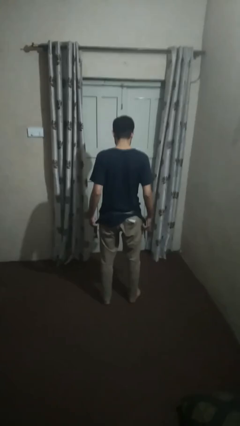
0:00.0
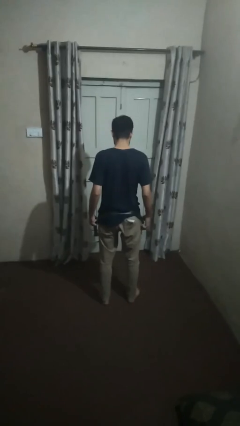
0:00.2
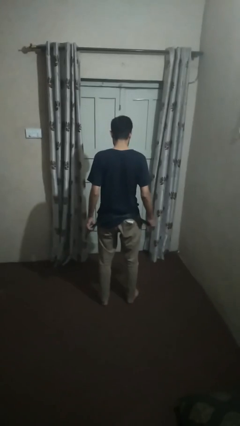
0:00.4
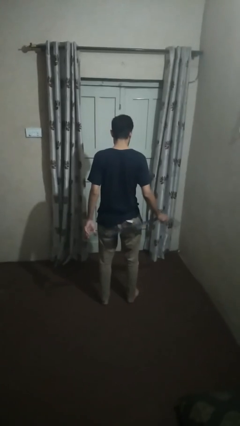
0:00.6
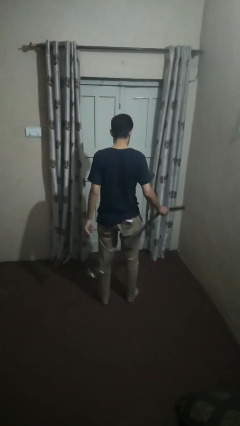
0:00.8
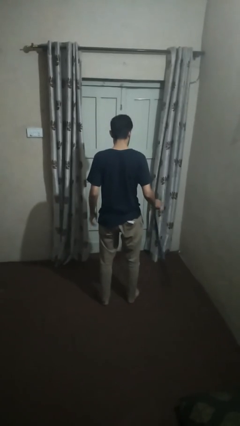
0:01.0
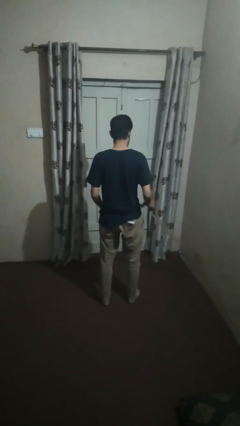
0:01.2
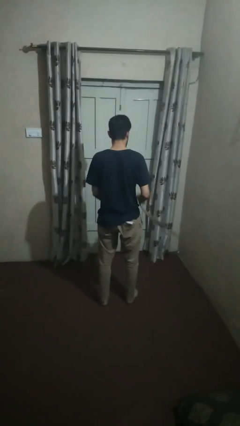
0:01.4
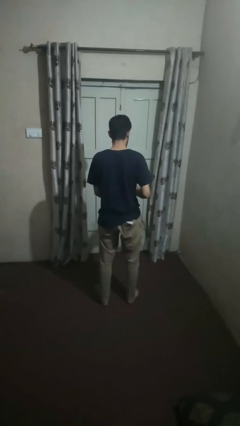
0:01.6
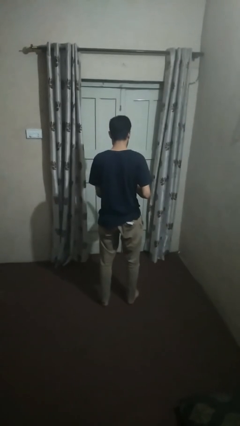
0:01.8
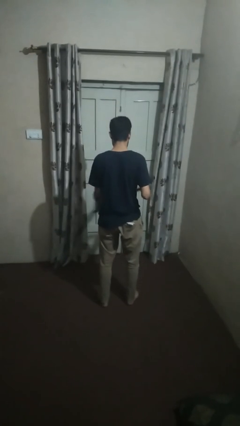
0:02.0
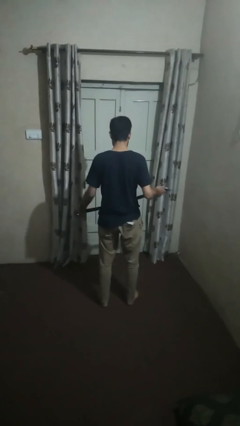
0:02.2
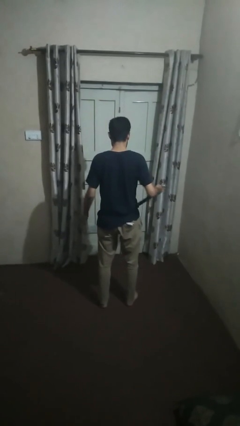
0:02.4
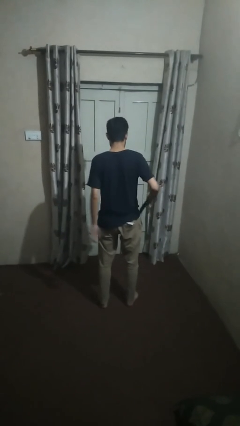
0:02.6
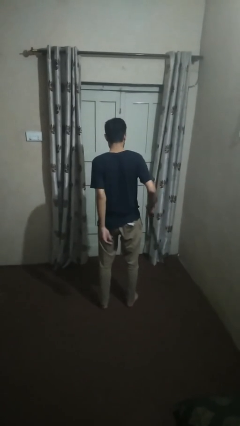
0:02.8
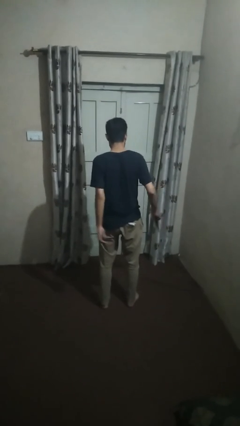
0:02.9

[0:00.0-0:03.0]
person takes off belt

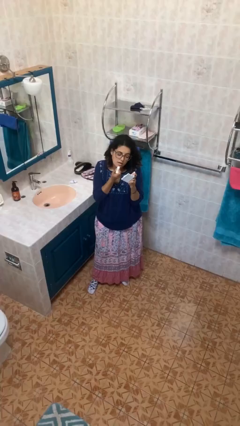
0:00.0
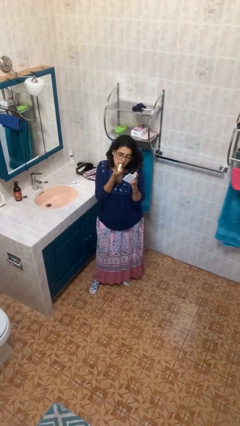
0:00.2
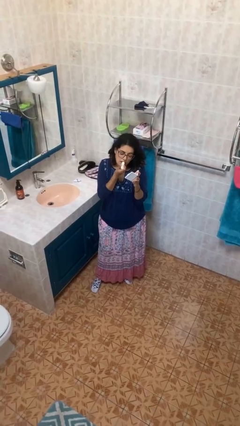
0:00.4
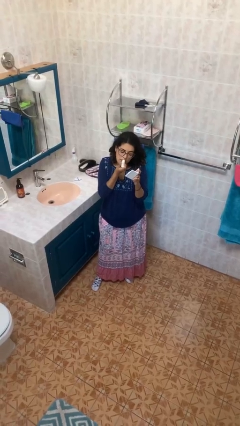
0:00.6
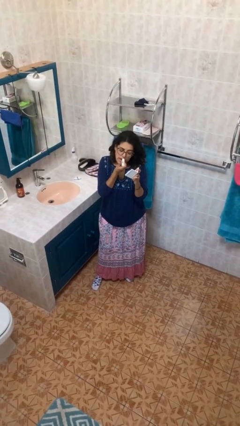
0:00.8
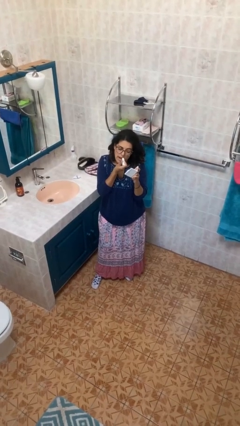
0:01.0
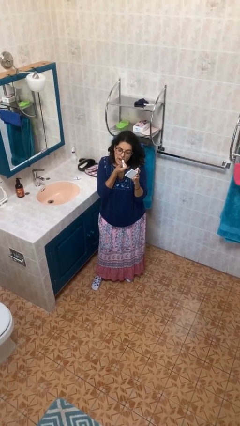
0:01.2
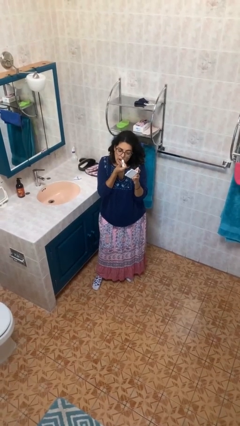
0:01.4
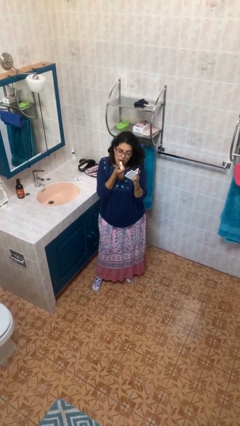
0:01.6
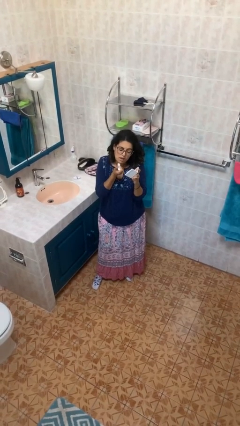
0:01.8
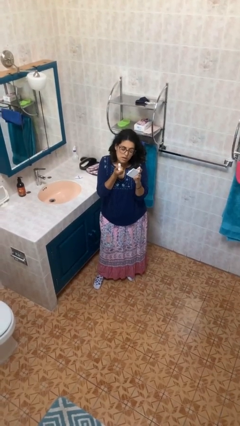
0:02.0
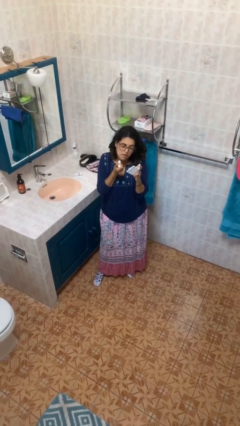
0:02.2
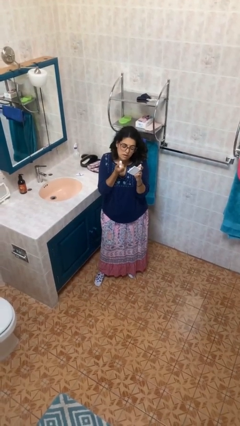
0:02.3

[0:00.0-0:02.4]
person applies lip makeup

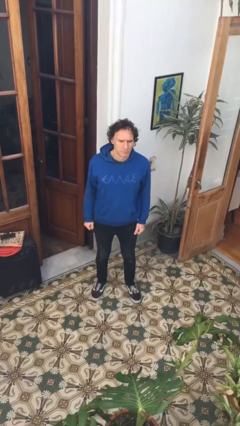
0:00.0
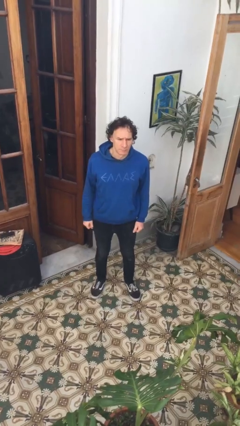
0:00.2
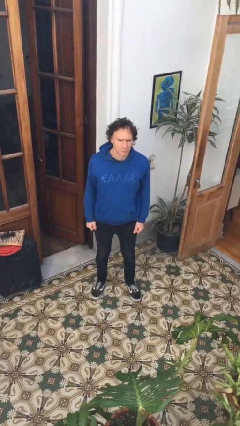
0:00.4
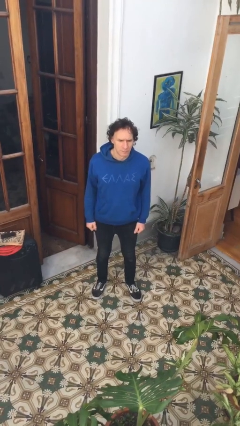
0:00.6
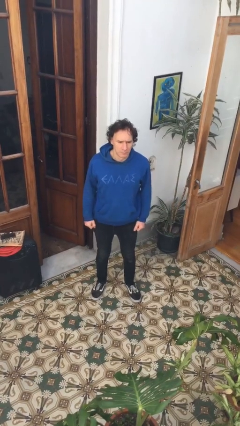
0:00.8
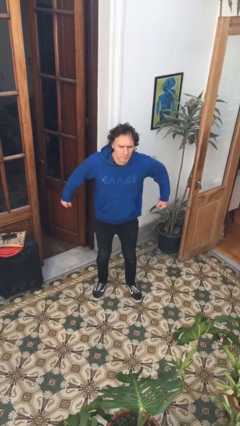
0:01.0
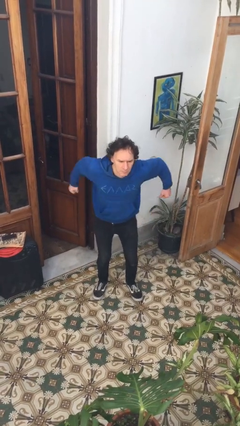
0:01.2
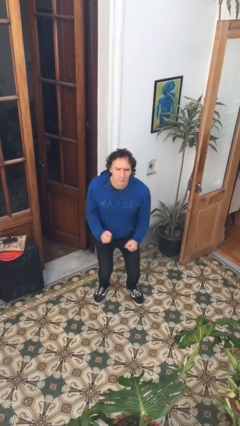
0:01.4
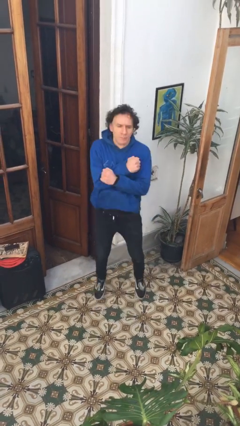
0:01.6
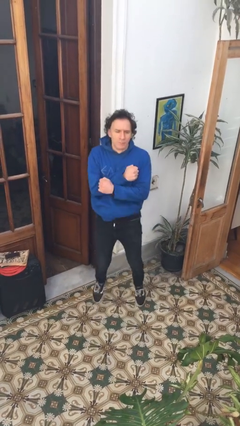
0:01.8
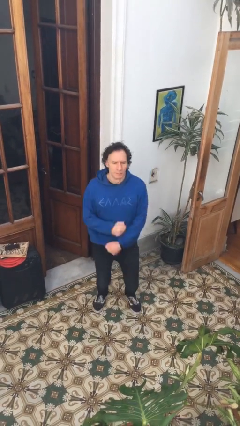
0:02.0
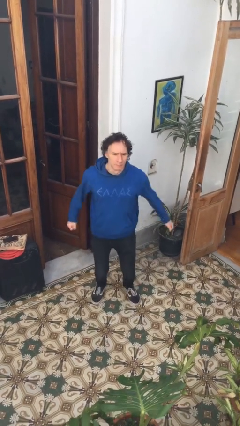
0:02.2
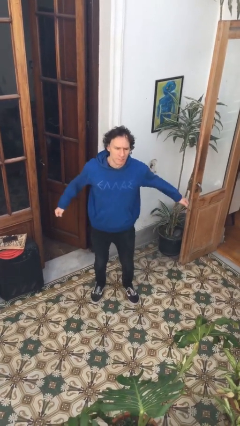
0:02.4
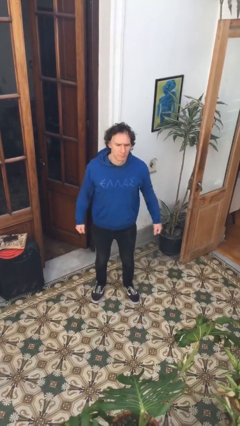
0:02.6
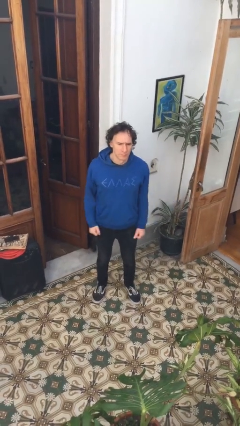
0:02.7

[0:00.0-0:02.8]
person jumps

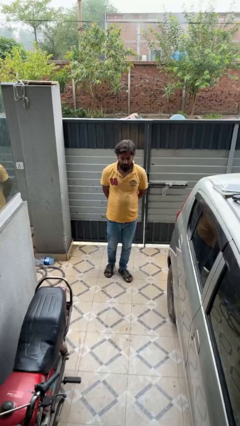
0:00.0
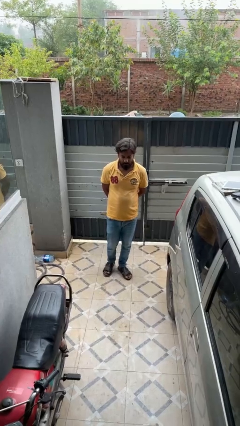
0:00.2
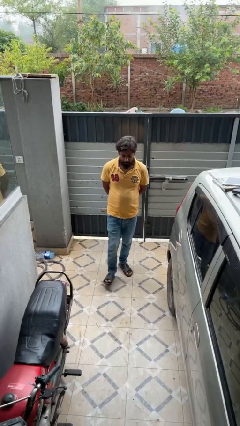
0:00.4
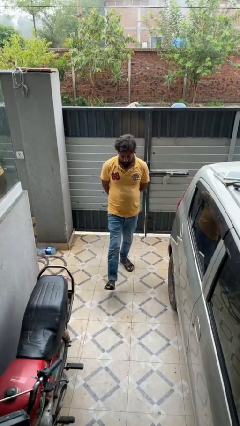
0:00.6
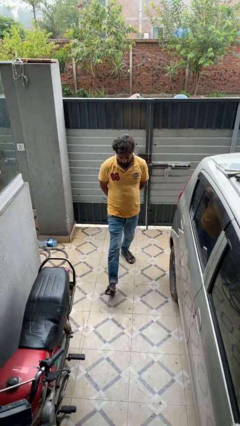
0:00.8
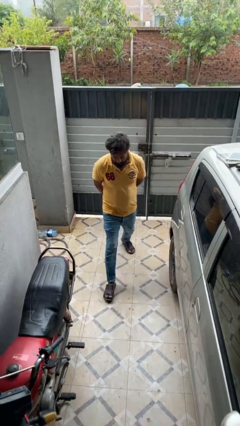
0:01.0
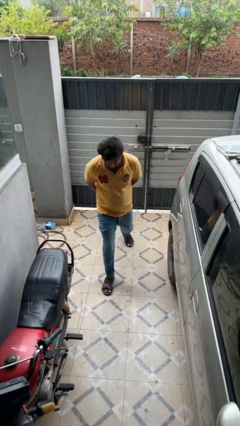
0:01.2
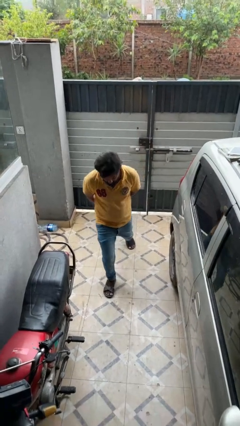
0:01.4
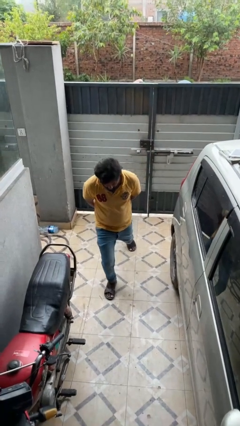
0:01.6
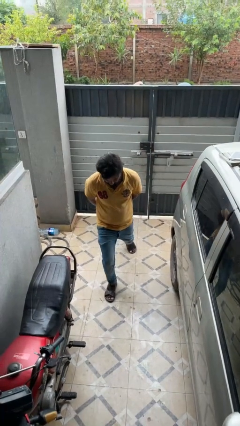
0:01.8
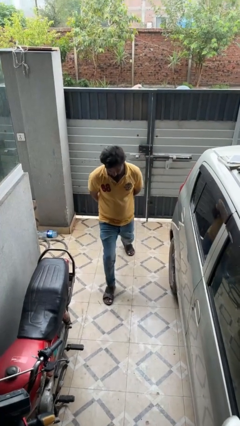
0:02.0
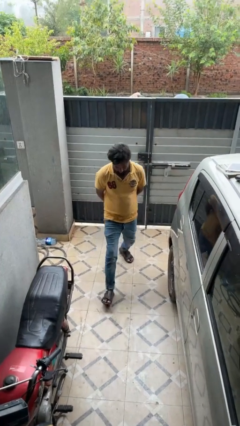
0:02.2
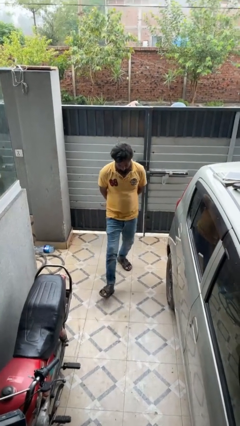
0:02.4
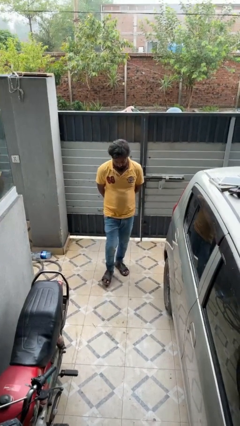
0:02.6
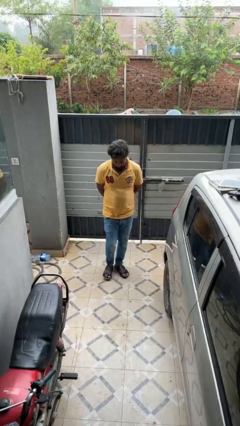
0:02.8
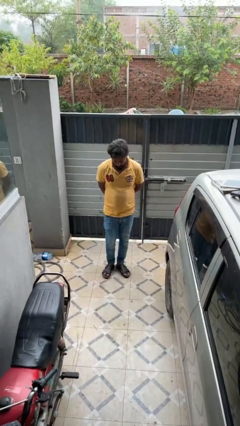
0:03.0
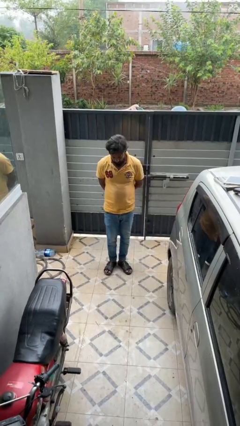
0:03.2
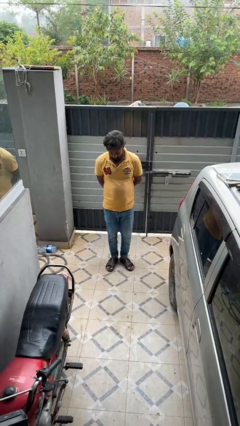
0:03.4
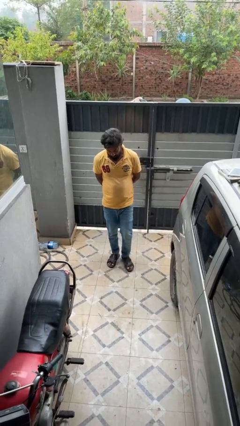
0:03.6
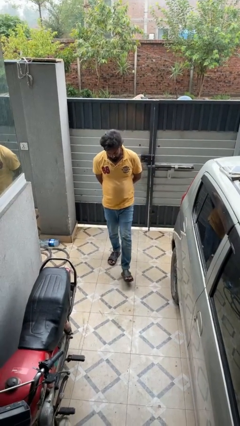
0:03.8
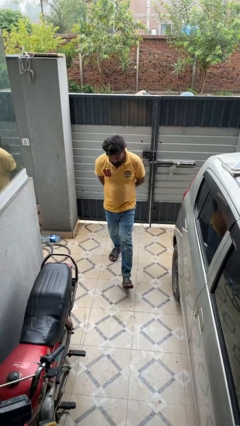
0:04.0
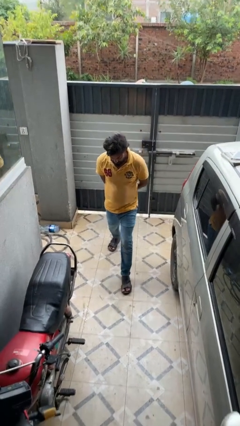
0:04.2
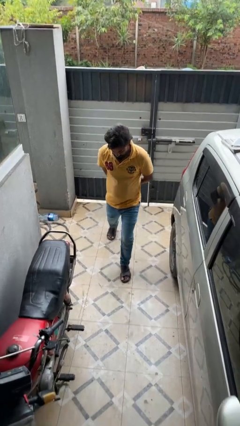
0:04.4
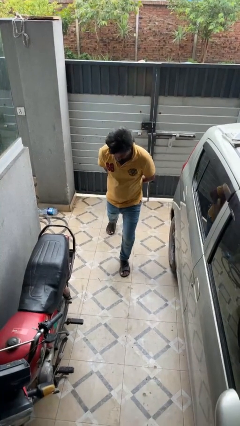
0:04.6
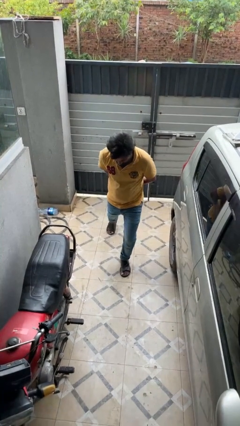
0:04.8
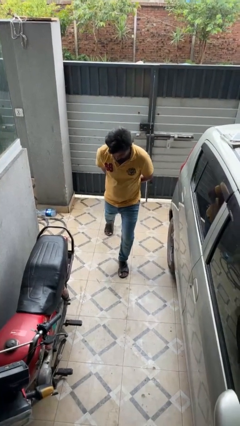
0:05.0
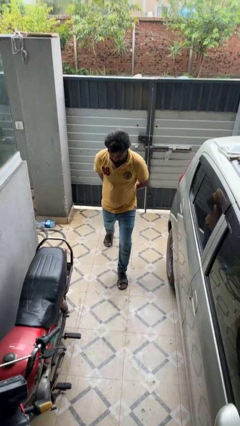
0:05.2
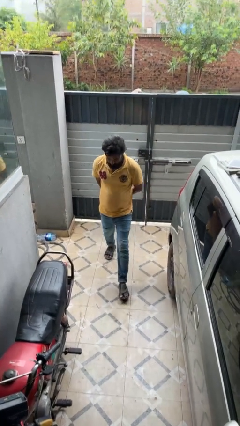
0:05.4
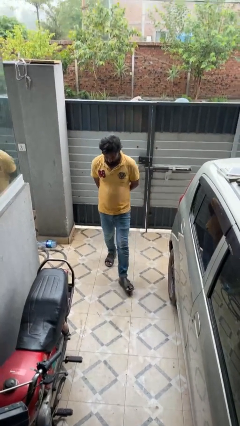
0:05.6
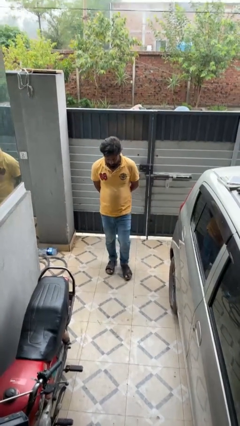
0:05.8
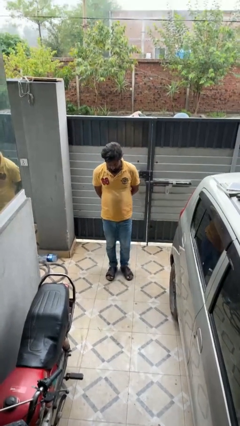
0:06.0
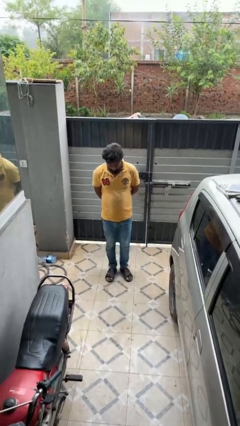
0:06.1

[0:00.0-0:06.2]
person exercises with lunges

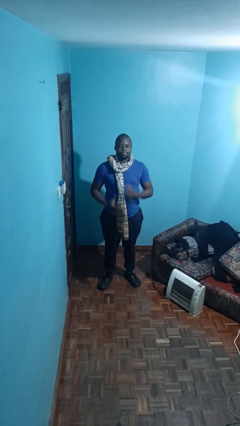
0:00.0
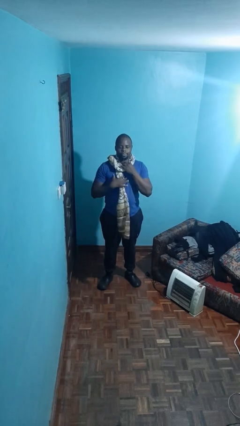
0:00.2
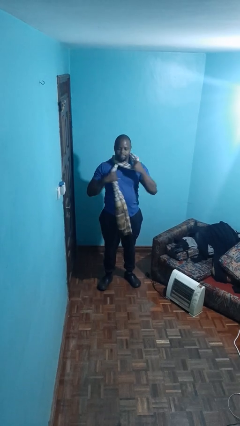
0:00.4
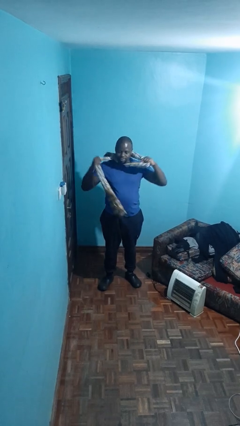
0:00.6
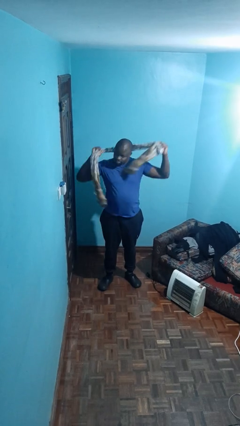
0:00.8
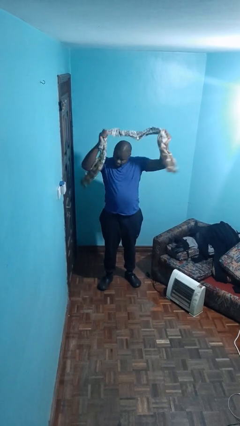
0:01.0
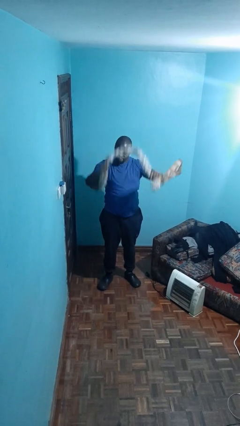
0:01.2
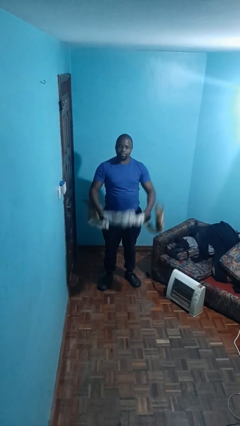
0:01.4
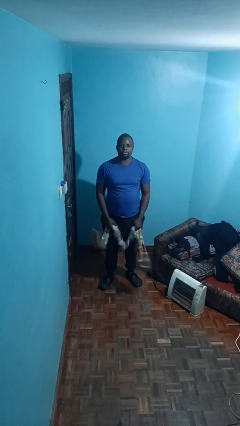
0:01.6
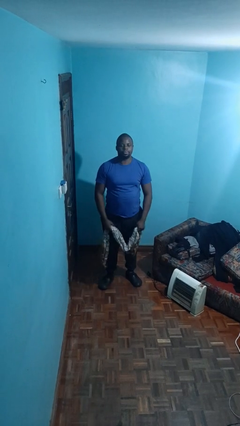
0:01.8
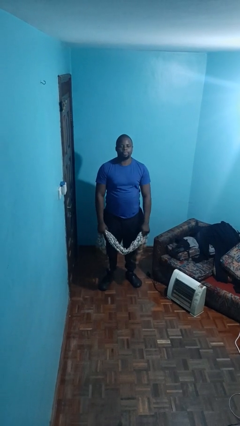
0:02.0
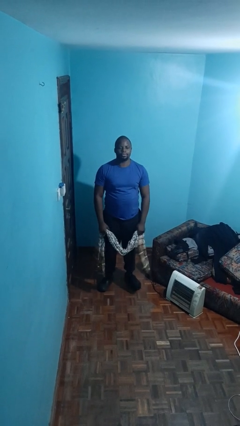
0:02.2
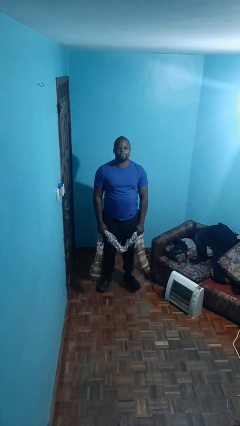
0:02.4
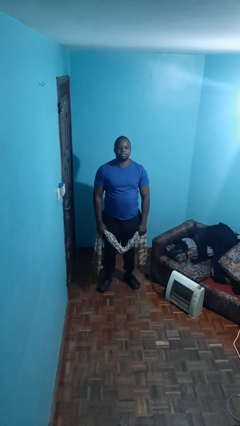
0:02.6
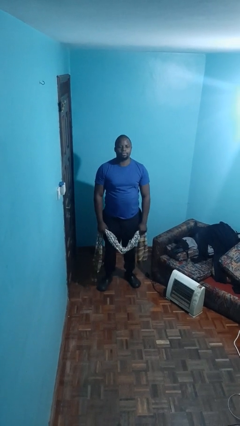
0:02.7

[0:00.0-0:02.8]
person takes off scarf
